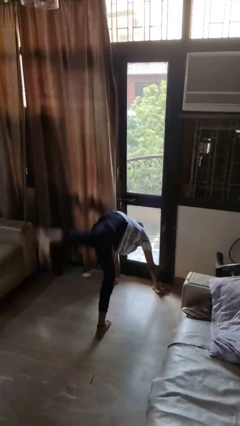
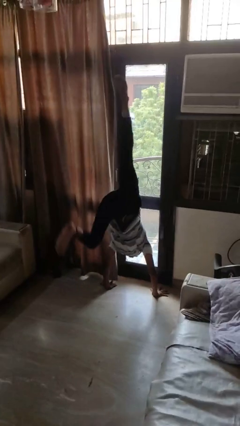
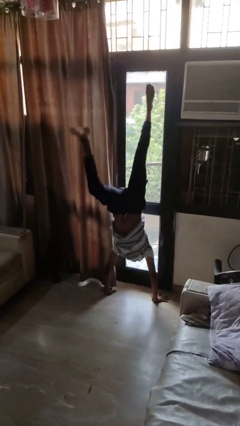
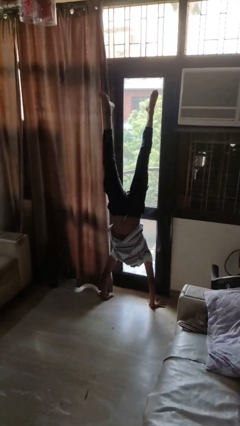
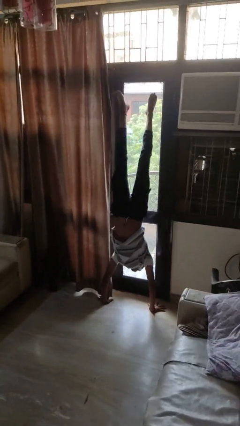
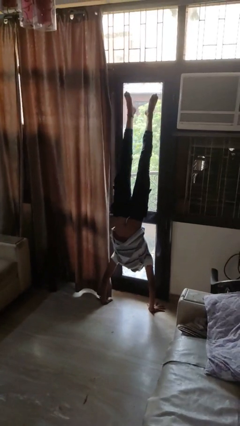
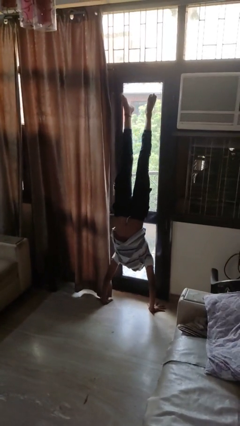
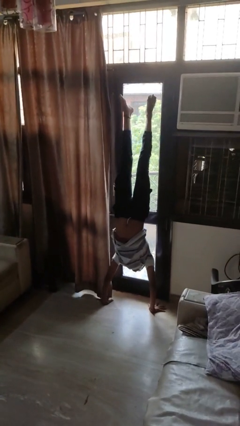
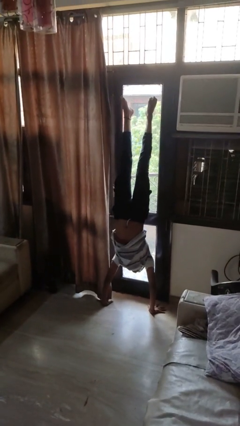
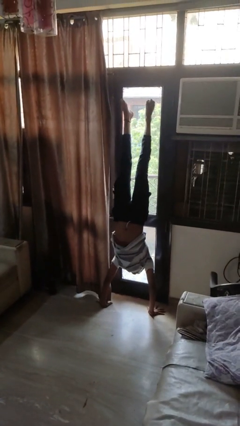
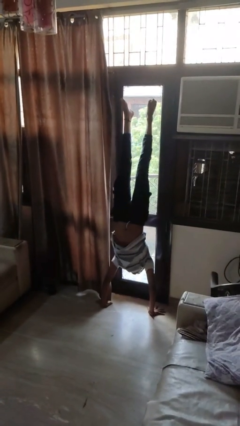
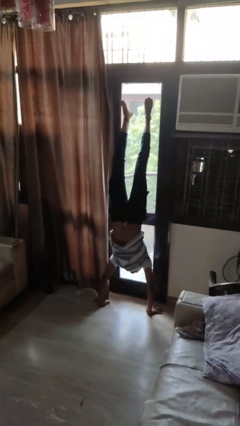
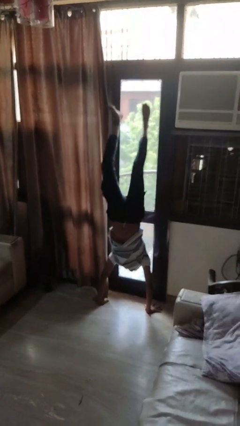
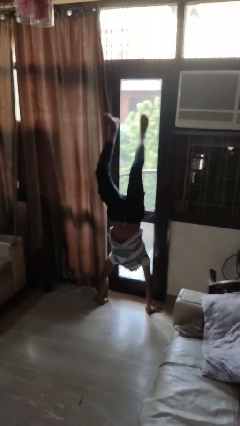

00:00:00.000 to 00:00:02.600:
person handstand

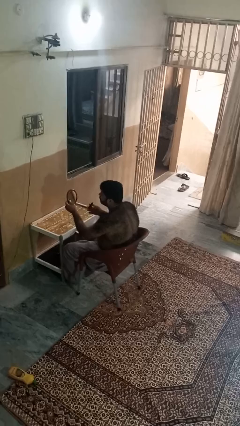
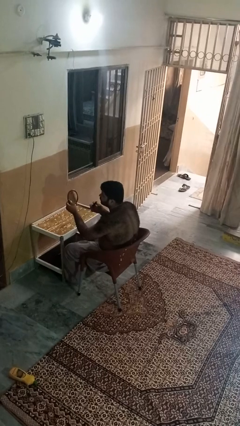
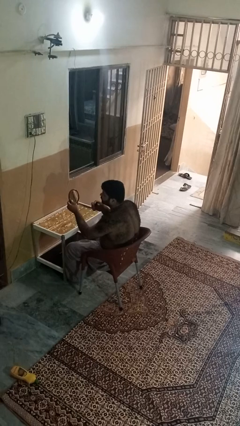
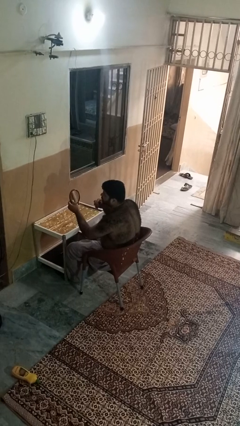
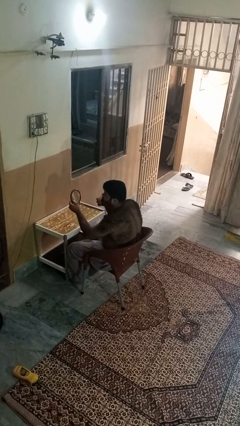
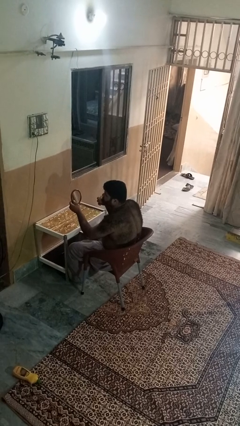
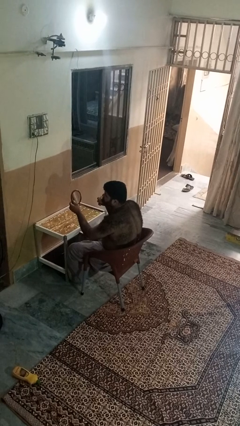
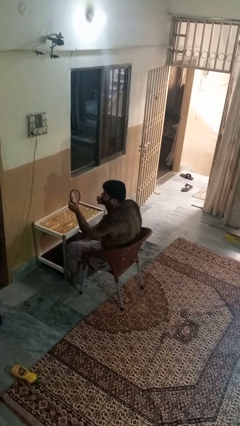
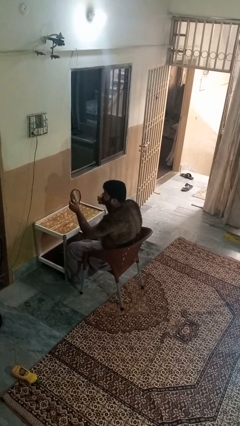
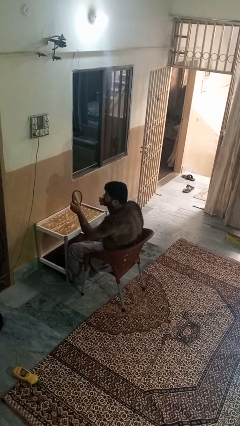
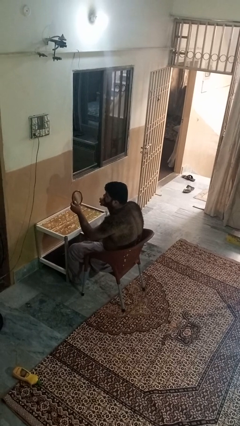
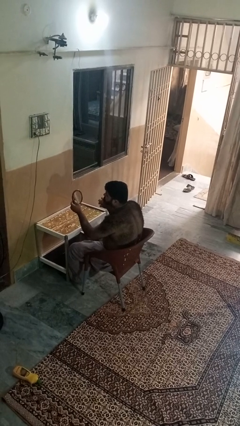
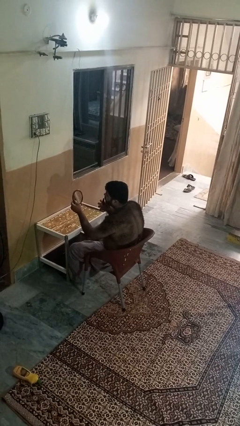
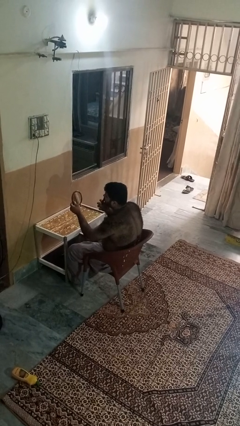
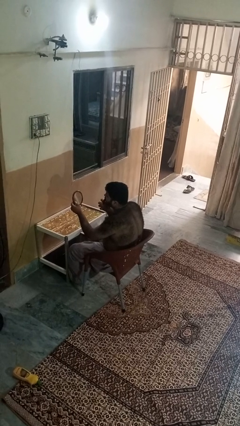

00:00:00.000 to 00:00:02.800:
person applies lip makeup

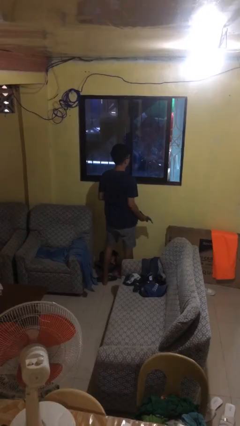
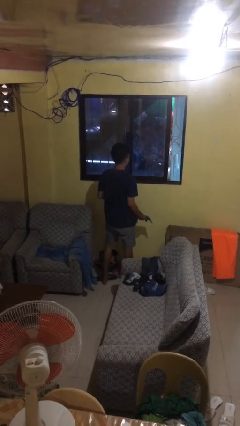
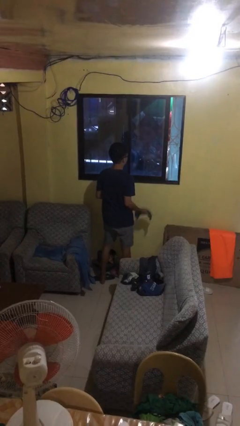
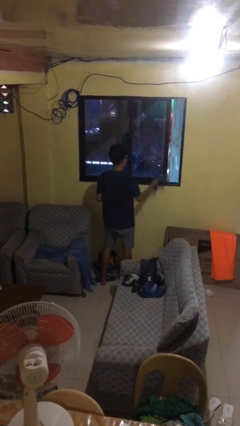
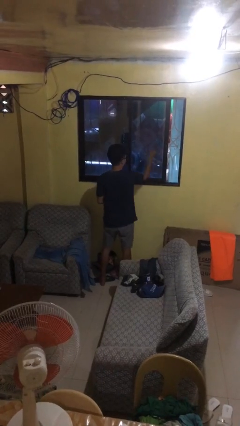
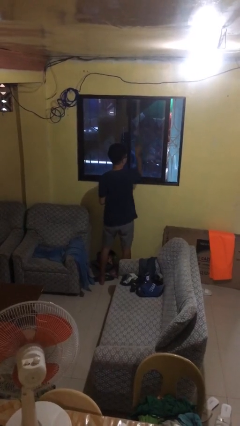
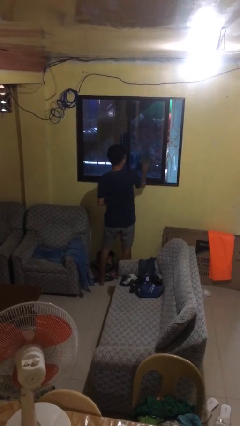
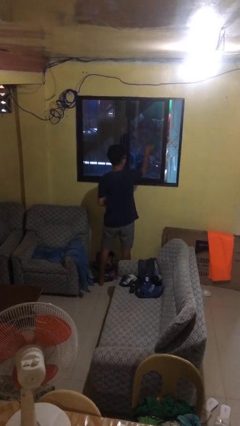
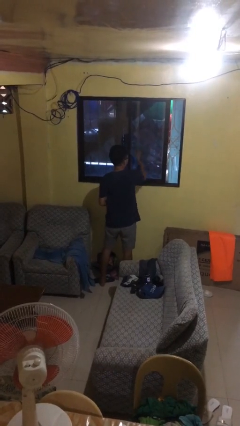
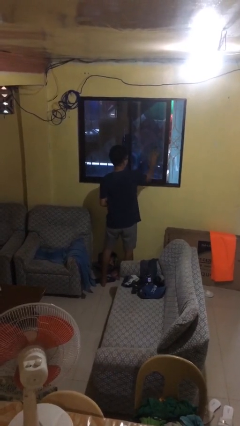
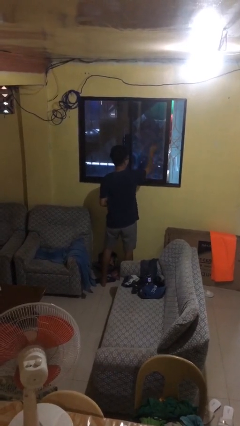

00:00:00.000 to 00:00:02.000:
person washes window

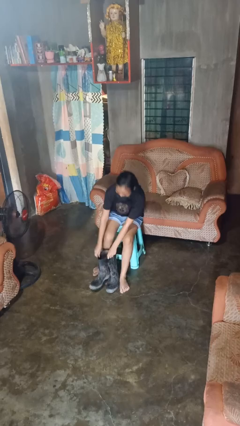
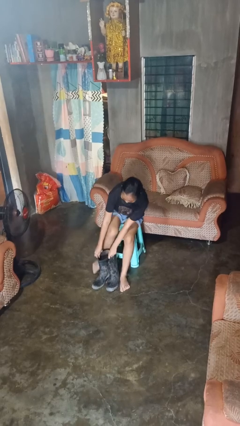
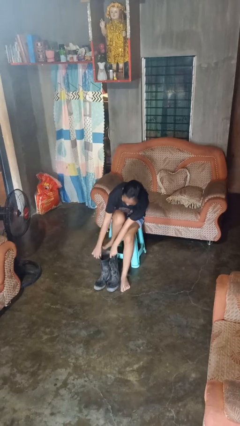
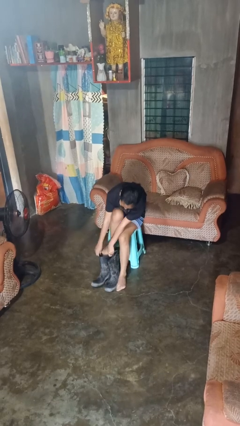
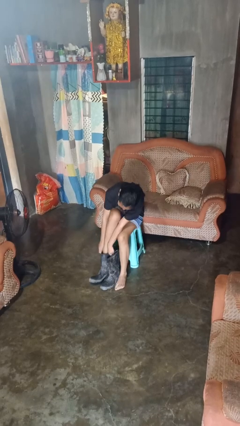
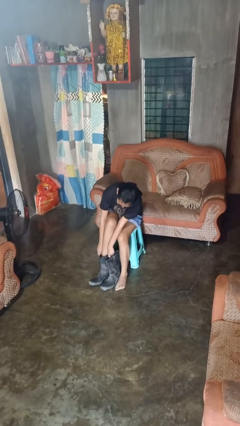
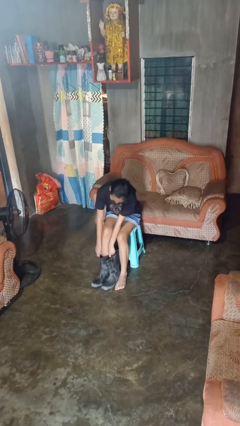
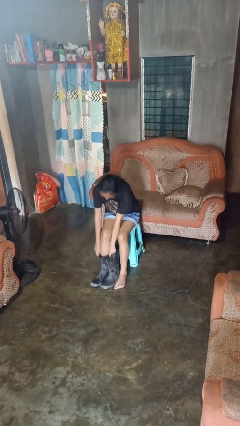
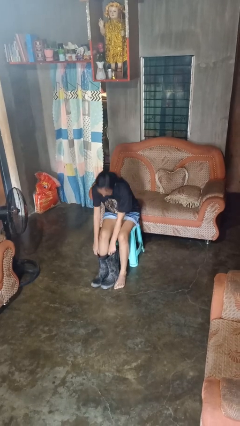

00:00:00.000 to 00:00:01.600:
person puts on boots

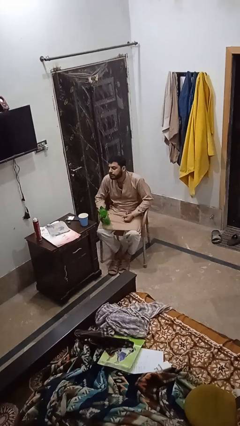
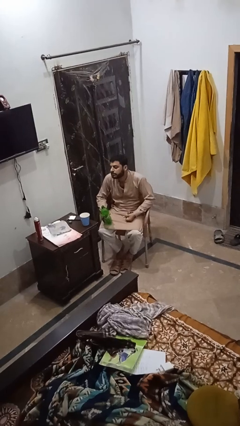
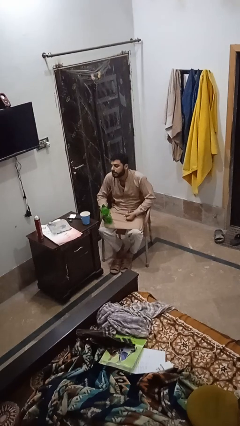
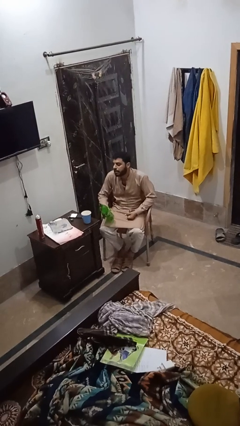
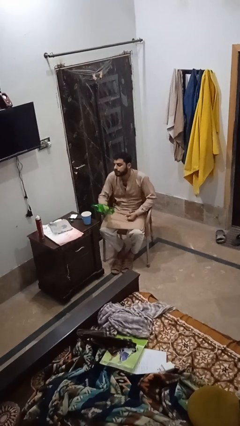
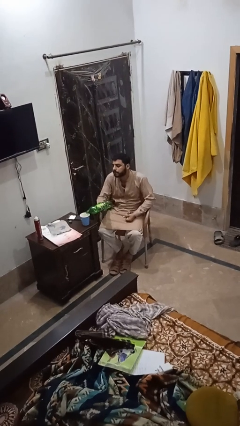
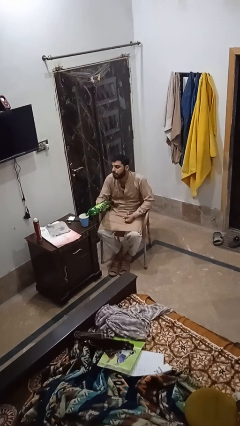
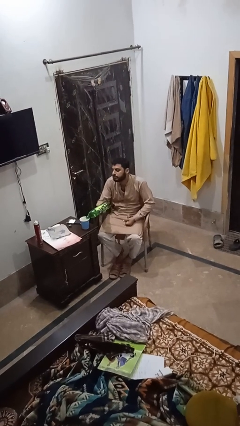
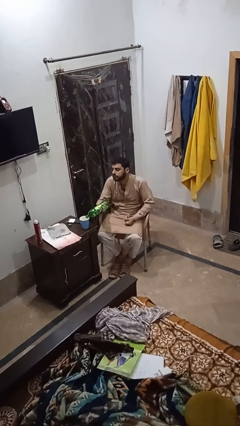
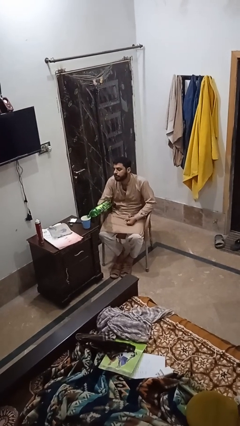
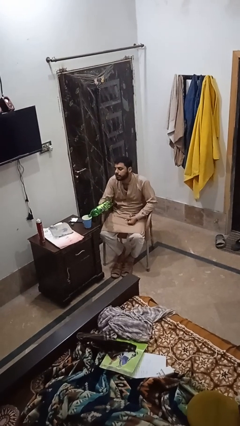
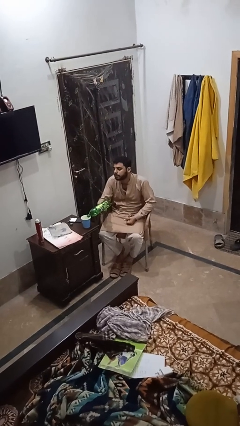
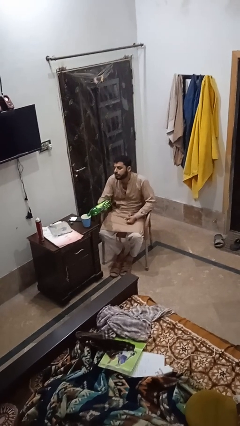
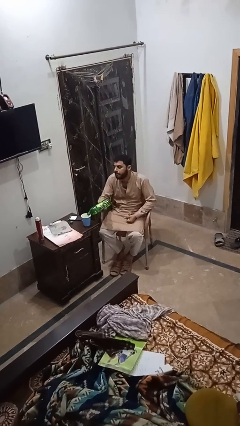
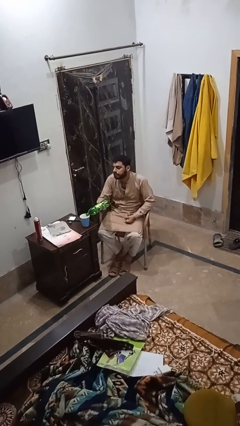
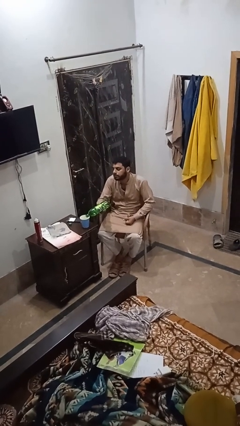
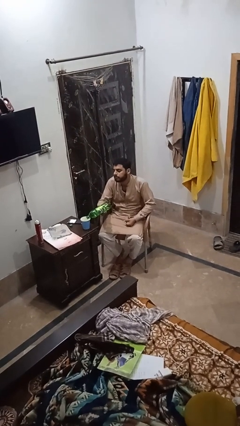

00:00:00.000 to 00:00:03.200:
person pours liquid into cup

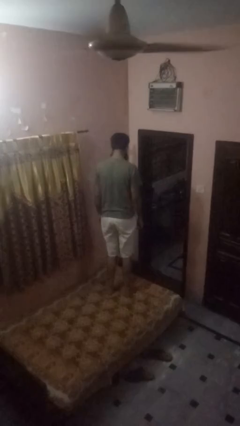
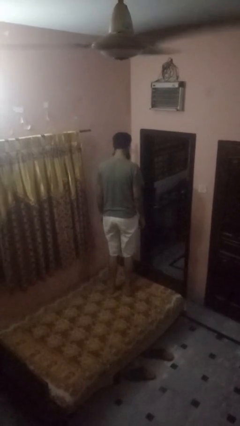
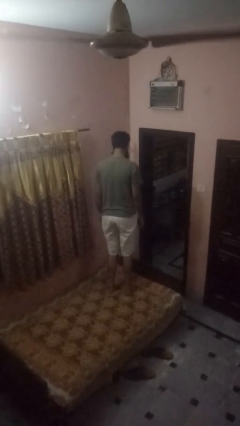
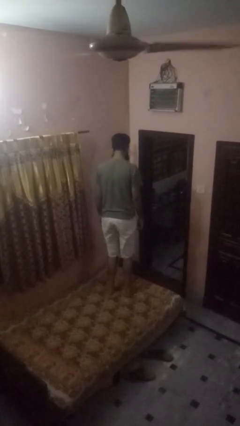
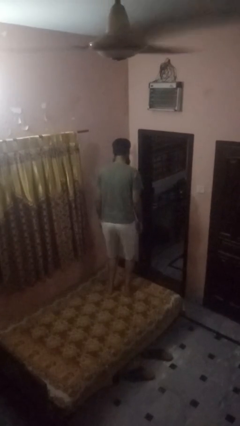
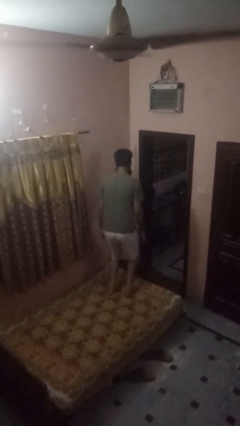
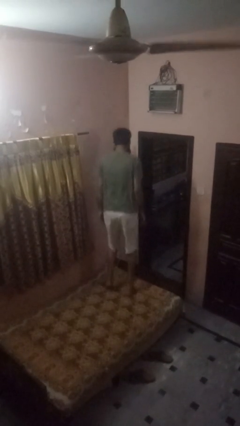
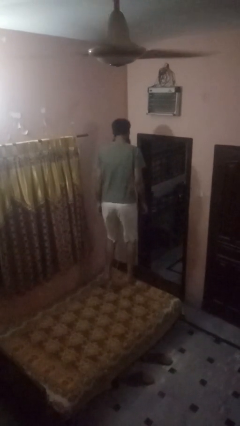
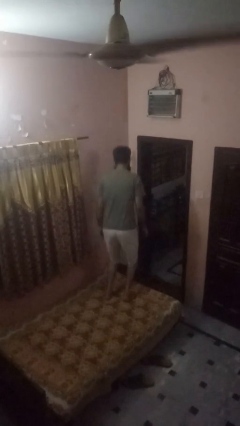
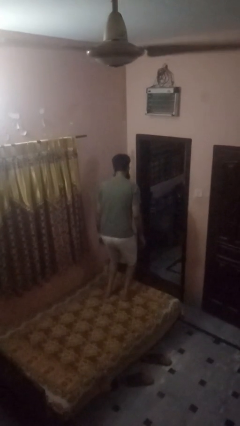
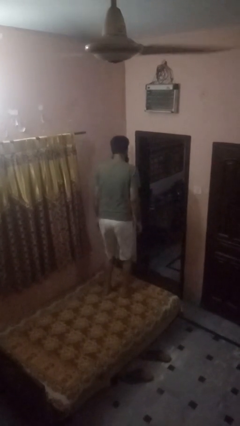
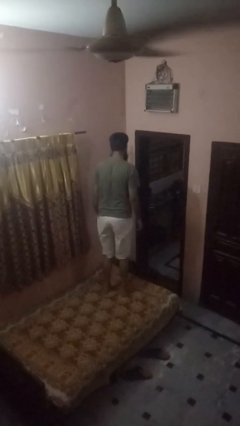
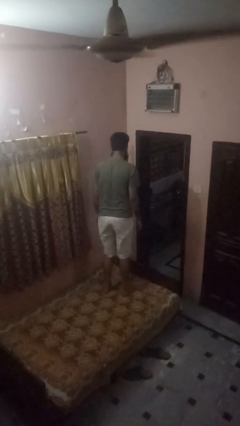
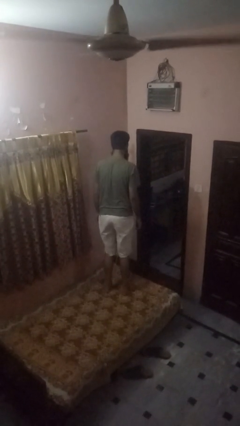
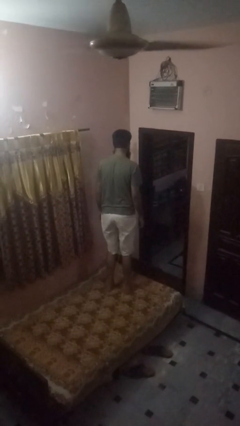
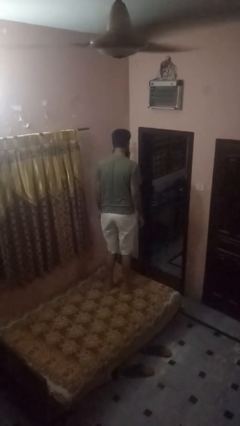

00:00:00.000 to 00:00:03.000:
person jumps on bed
